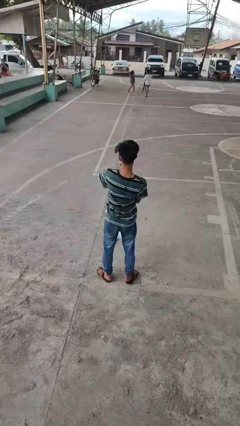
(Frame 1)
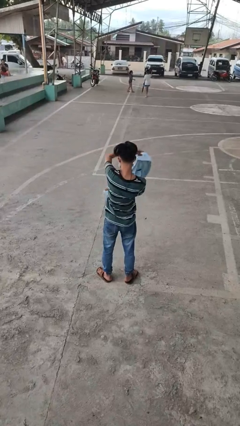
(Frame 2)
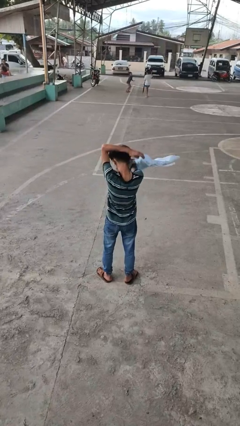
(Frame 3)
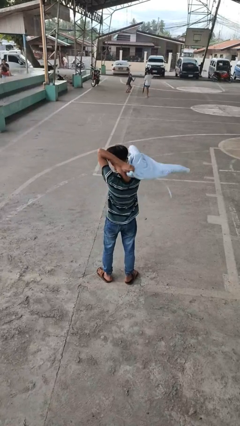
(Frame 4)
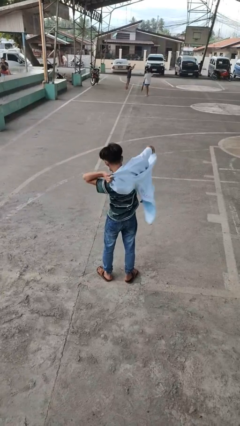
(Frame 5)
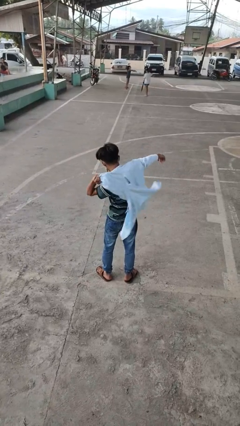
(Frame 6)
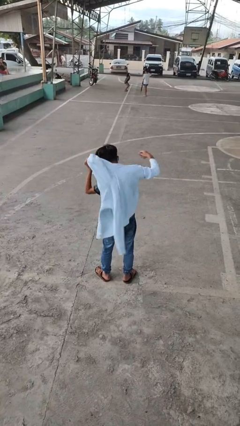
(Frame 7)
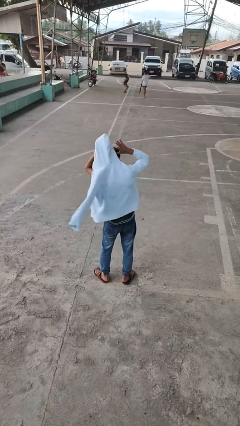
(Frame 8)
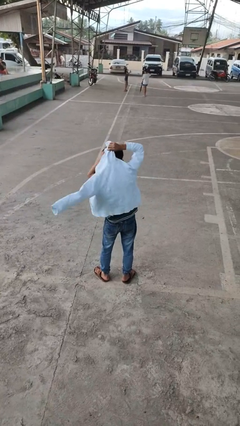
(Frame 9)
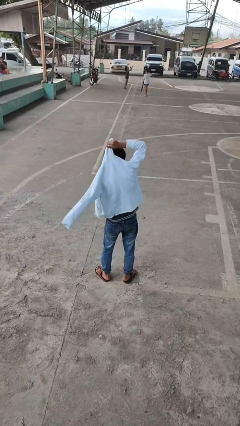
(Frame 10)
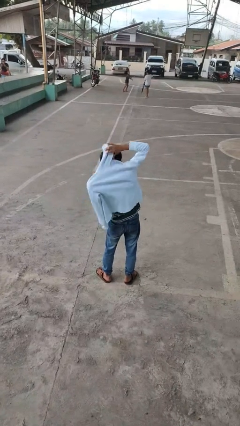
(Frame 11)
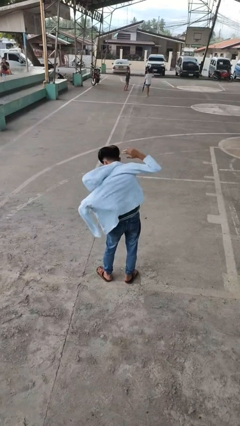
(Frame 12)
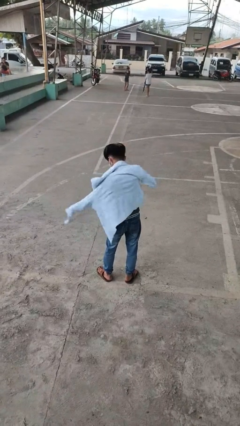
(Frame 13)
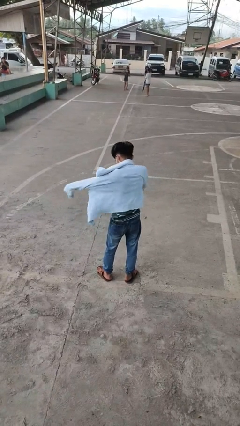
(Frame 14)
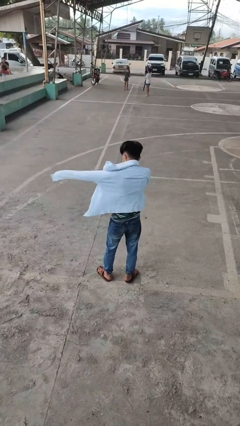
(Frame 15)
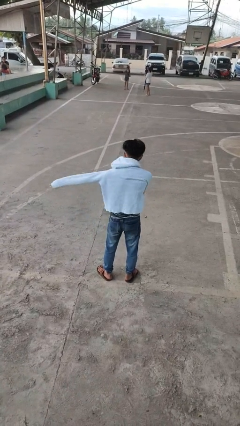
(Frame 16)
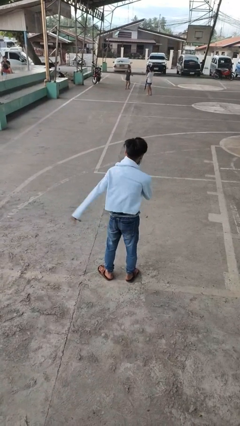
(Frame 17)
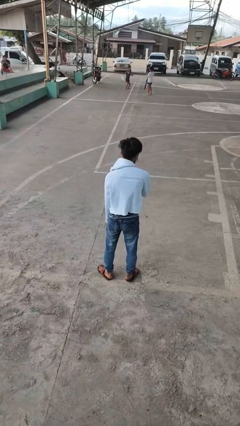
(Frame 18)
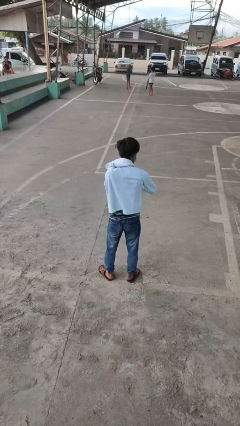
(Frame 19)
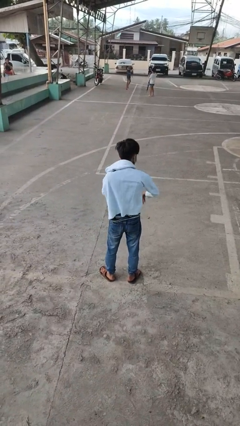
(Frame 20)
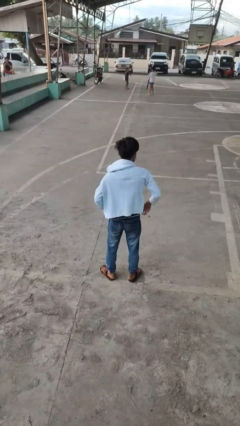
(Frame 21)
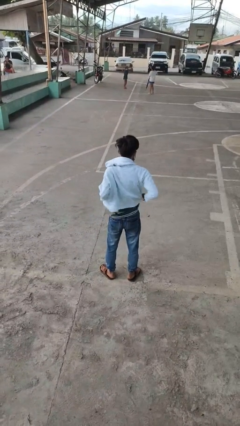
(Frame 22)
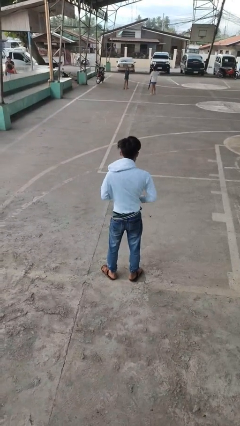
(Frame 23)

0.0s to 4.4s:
person puts on jacket

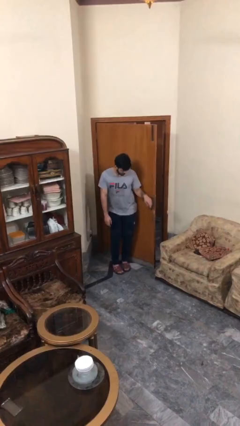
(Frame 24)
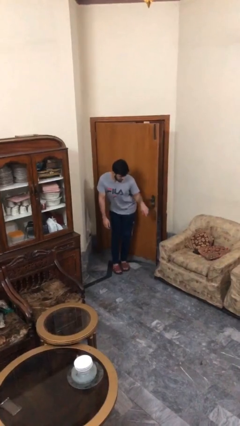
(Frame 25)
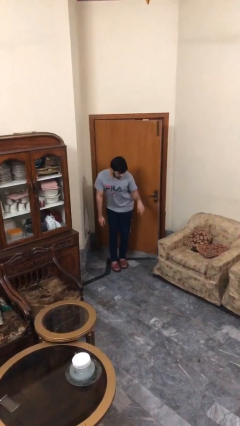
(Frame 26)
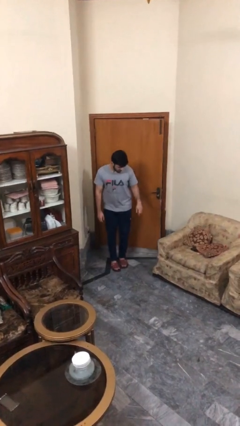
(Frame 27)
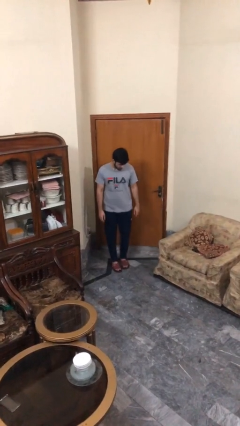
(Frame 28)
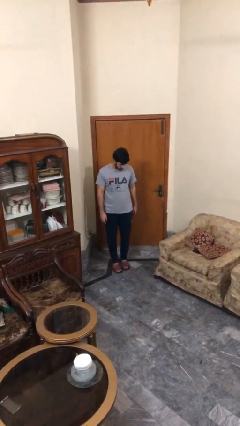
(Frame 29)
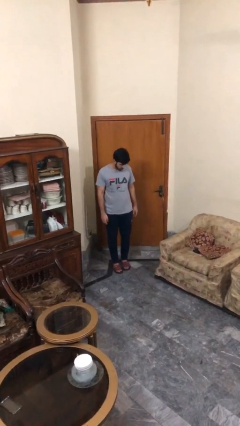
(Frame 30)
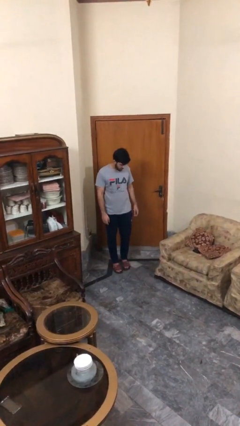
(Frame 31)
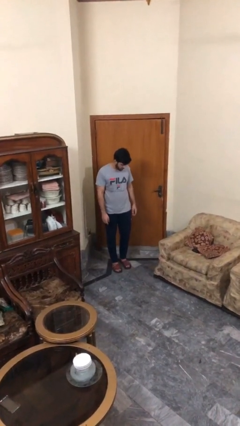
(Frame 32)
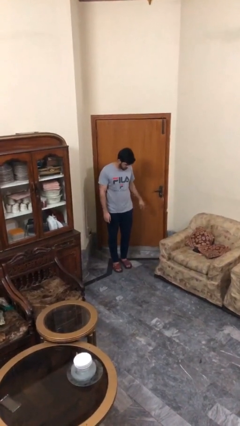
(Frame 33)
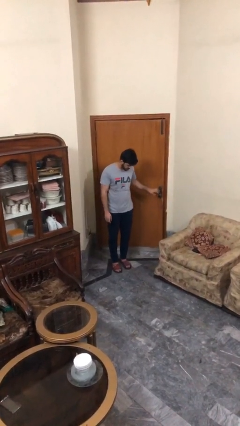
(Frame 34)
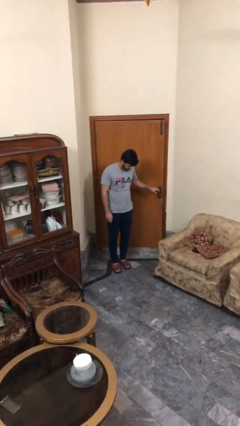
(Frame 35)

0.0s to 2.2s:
person closes door with hip

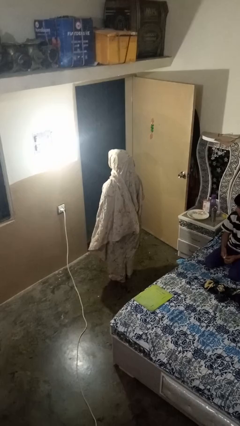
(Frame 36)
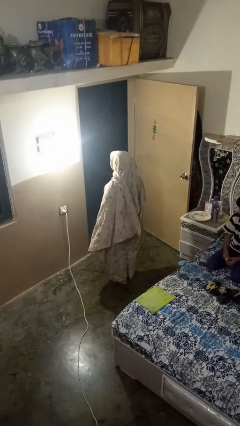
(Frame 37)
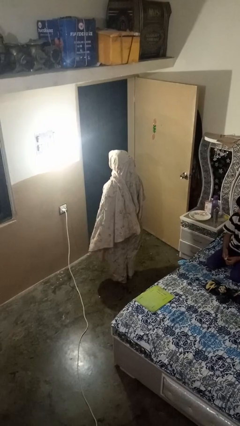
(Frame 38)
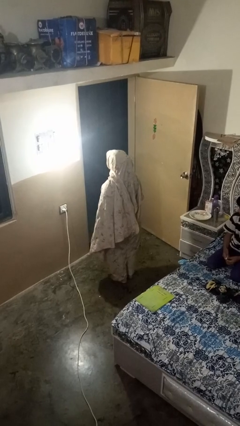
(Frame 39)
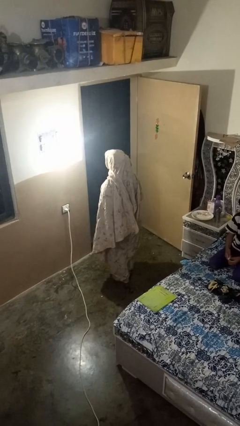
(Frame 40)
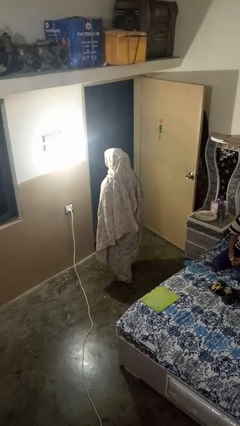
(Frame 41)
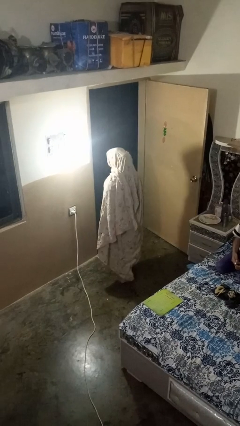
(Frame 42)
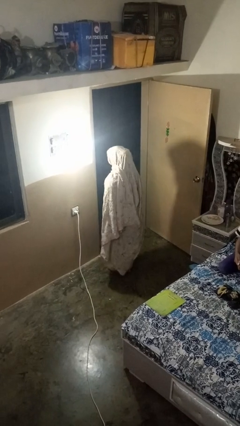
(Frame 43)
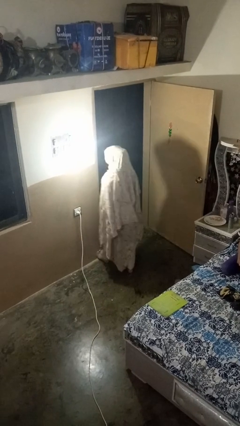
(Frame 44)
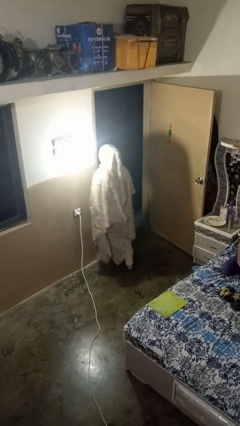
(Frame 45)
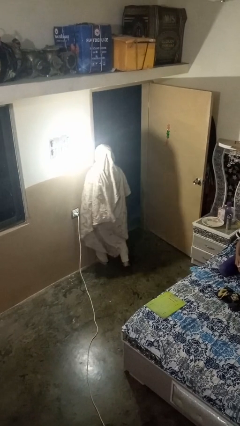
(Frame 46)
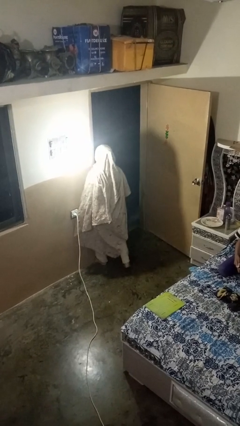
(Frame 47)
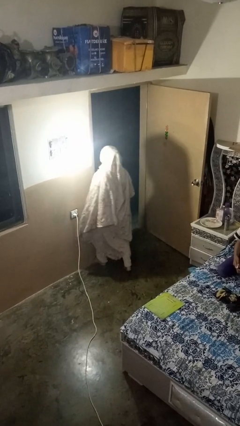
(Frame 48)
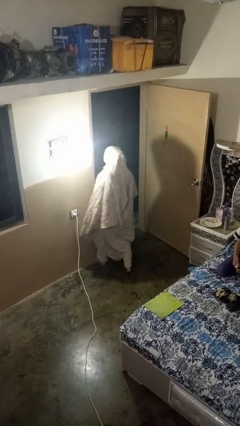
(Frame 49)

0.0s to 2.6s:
person bumps into wall

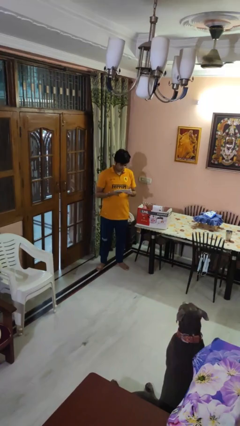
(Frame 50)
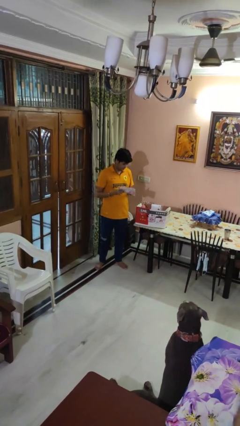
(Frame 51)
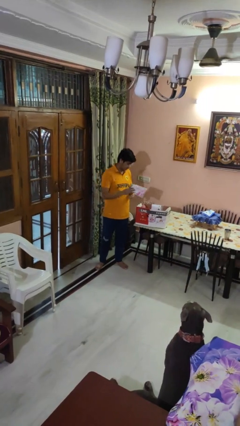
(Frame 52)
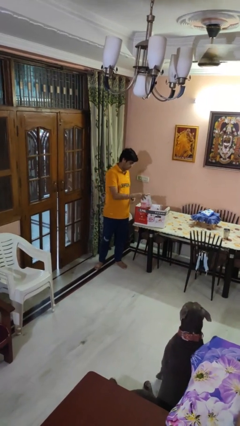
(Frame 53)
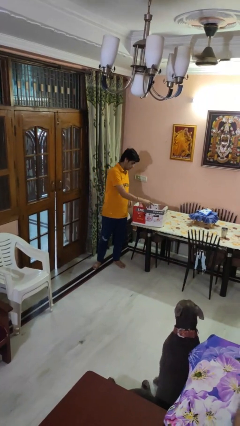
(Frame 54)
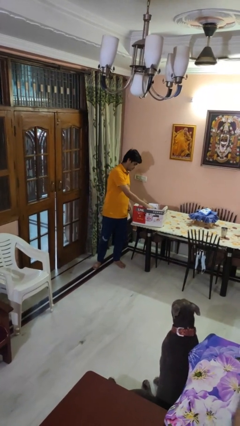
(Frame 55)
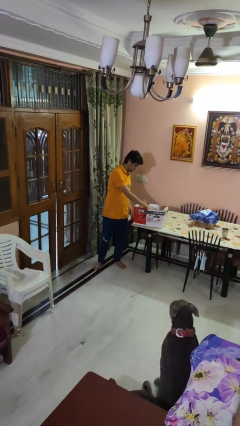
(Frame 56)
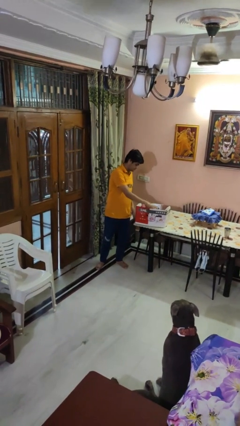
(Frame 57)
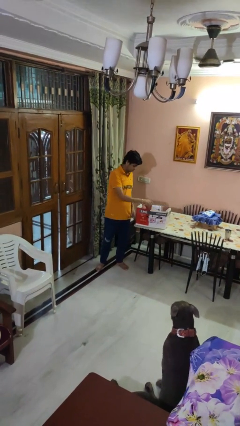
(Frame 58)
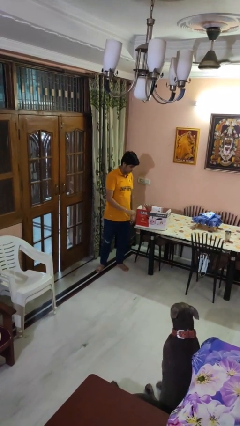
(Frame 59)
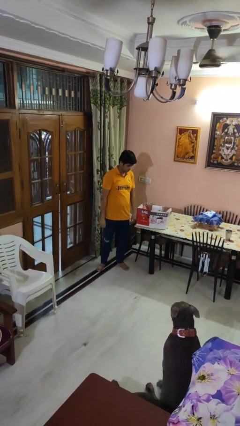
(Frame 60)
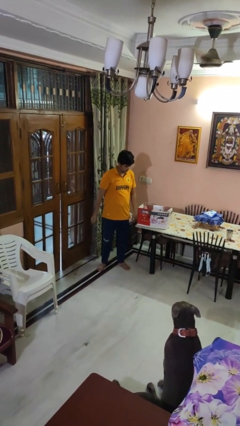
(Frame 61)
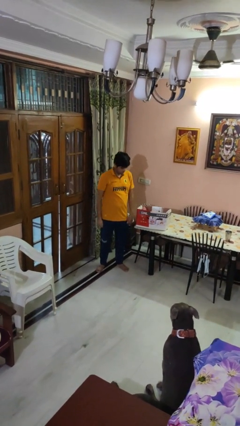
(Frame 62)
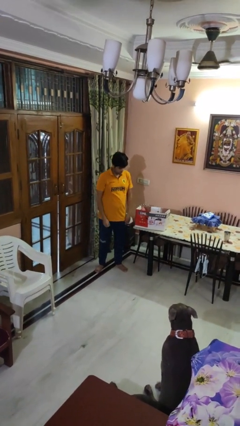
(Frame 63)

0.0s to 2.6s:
person puts object into box

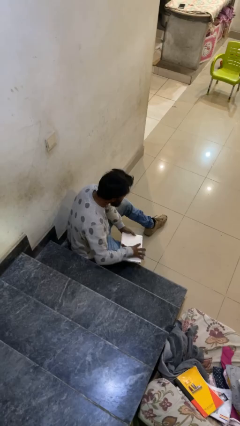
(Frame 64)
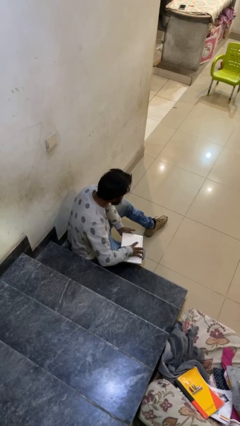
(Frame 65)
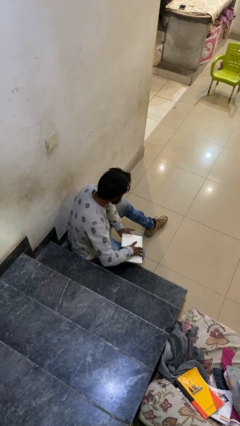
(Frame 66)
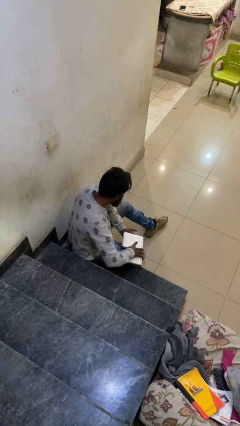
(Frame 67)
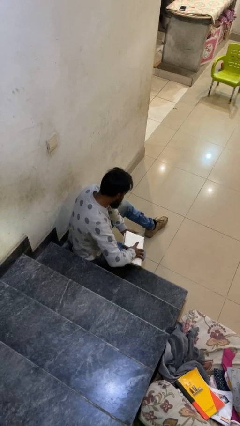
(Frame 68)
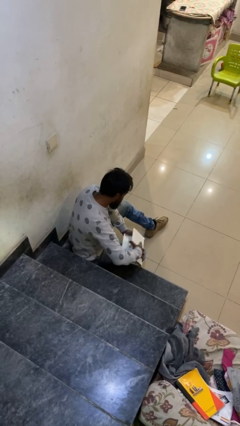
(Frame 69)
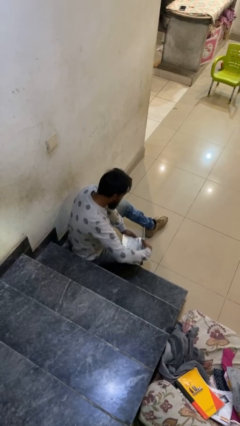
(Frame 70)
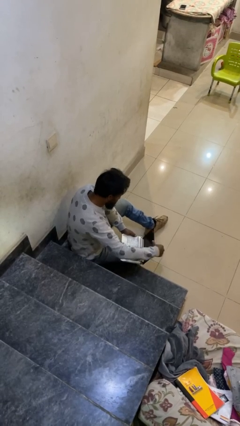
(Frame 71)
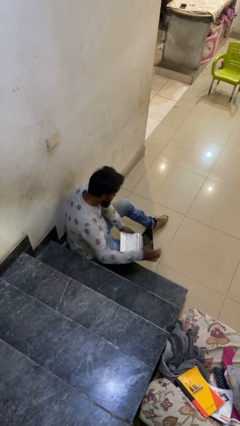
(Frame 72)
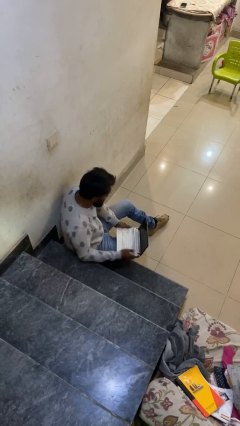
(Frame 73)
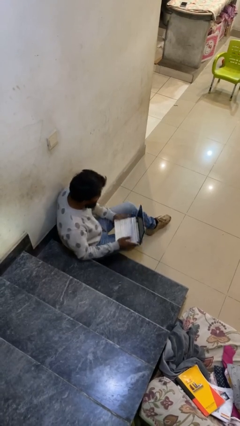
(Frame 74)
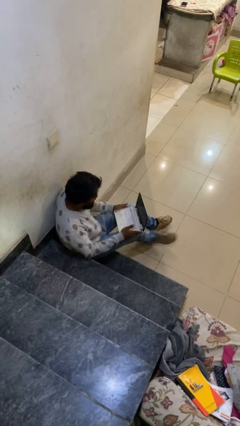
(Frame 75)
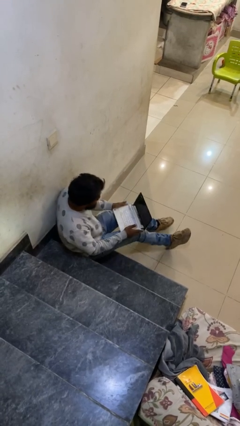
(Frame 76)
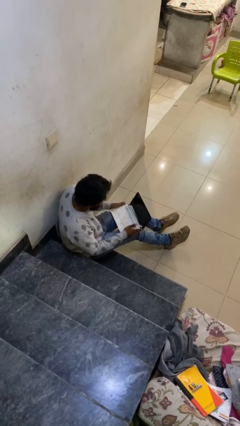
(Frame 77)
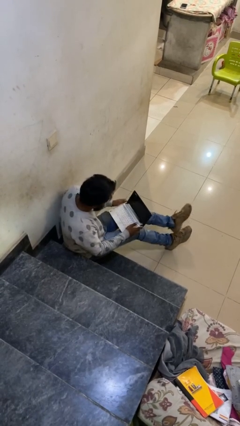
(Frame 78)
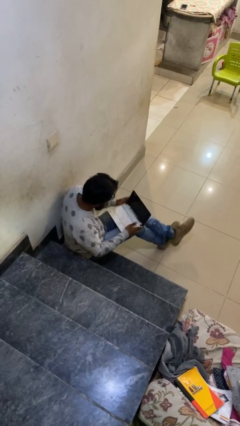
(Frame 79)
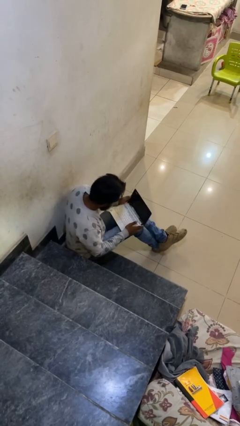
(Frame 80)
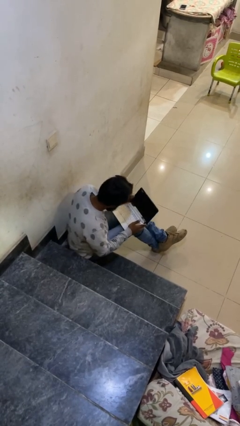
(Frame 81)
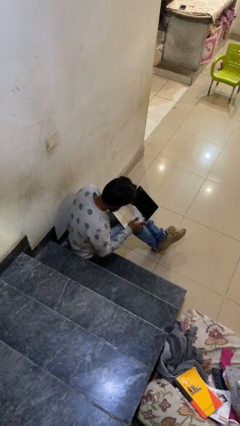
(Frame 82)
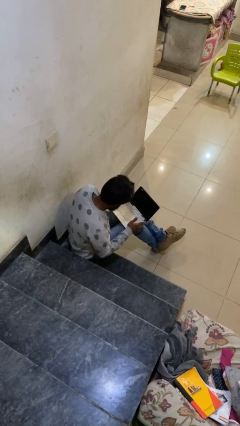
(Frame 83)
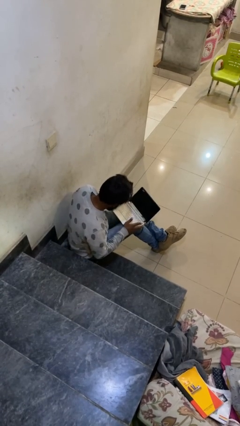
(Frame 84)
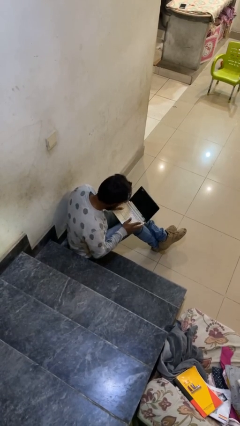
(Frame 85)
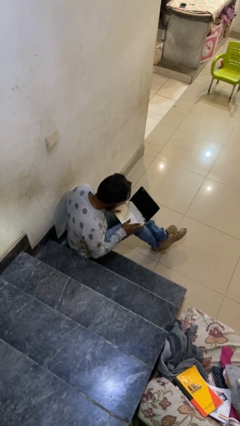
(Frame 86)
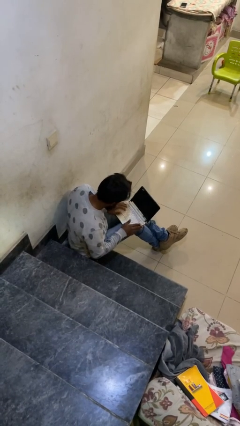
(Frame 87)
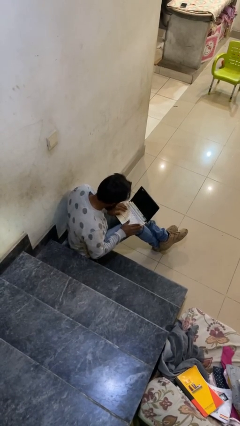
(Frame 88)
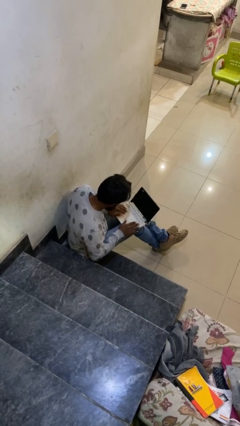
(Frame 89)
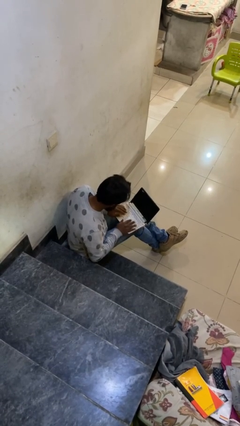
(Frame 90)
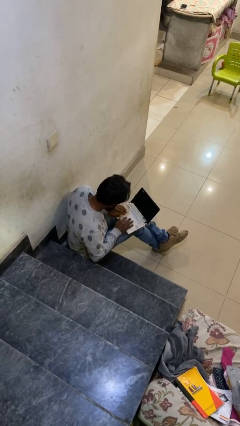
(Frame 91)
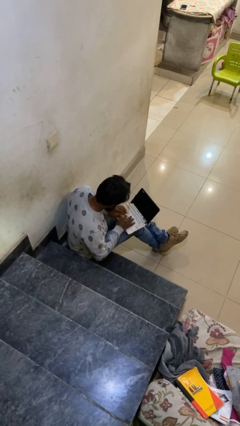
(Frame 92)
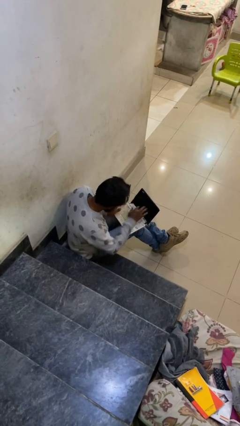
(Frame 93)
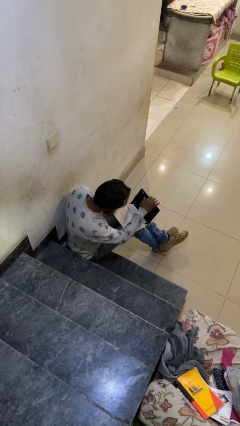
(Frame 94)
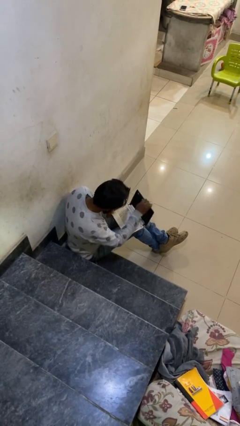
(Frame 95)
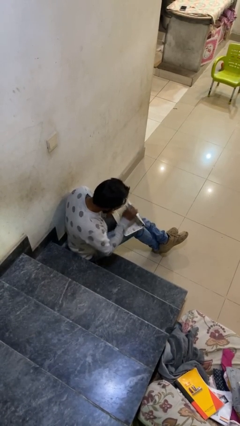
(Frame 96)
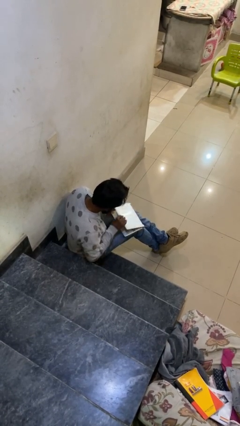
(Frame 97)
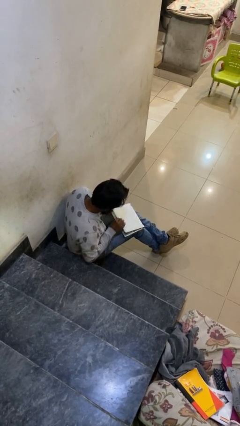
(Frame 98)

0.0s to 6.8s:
person interacts with laptop
